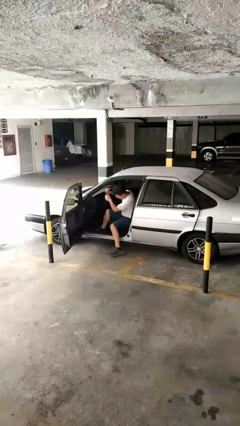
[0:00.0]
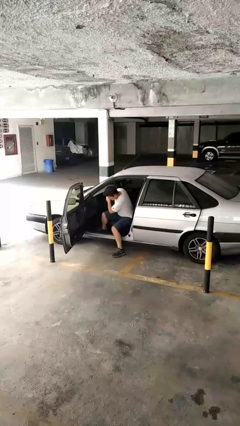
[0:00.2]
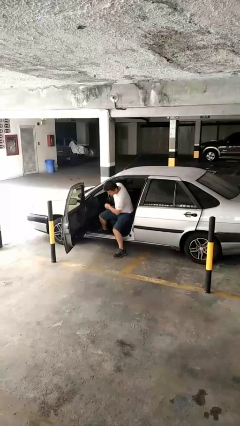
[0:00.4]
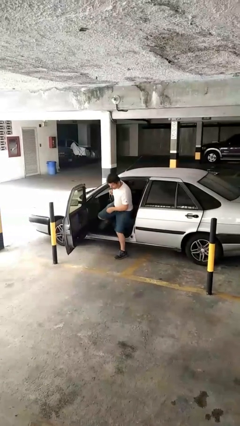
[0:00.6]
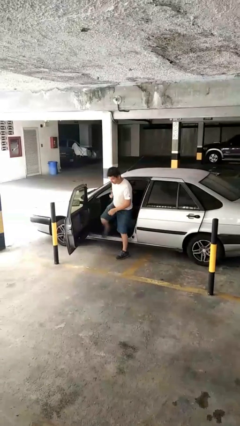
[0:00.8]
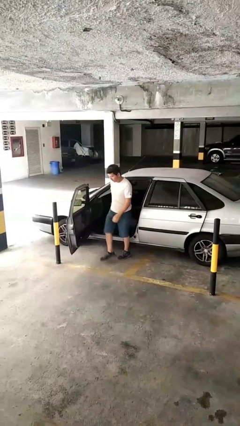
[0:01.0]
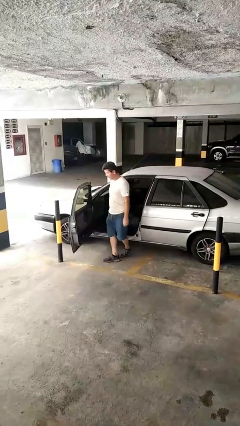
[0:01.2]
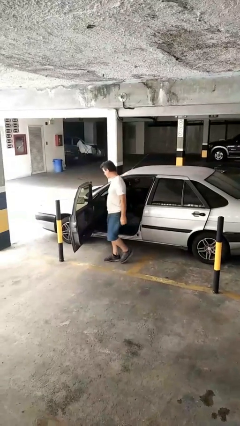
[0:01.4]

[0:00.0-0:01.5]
person exits car

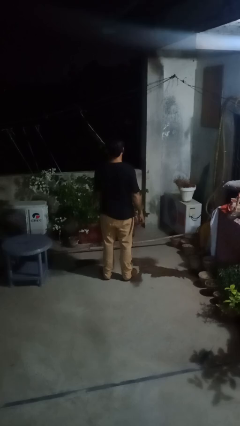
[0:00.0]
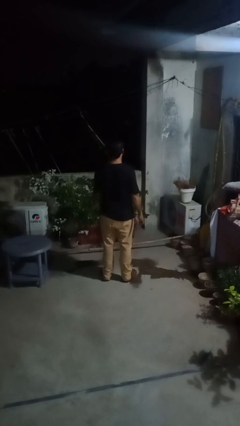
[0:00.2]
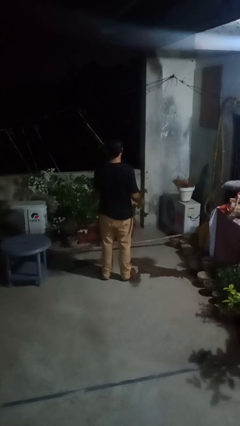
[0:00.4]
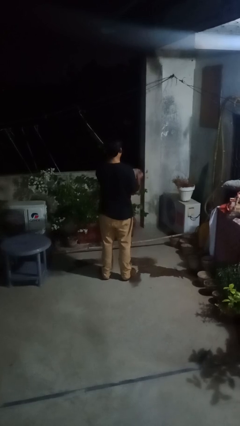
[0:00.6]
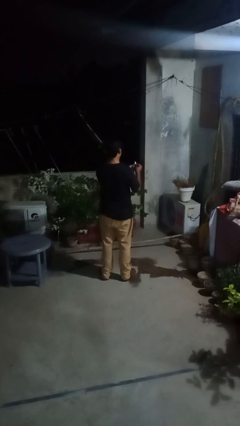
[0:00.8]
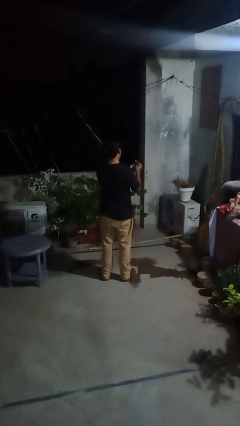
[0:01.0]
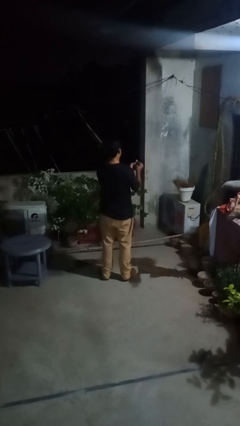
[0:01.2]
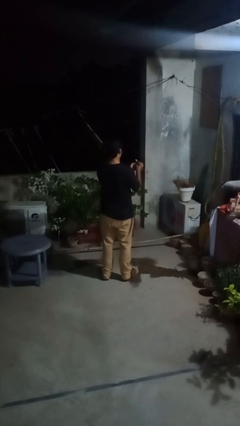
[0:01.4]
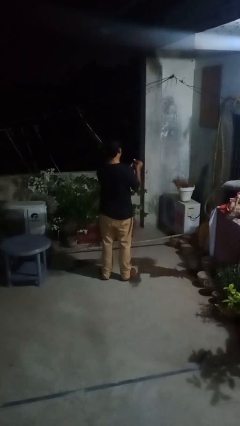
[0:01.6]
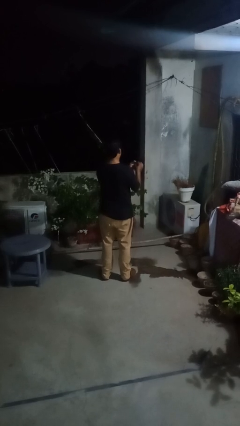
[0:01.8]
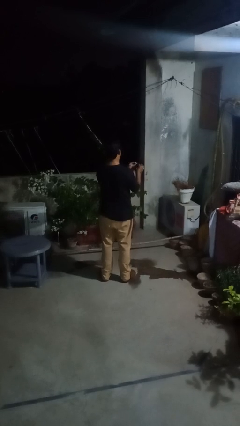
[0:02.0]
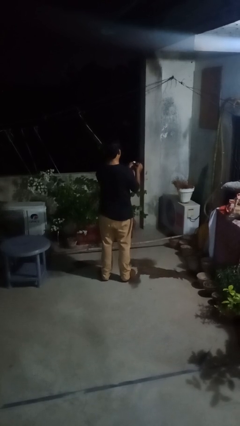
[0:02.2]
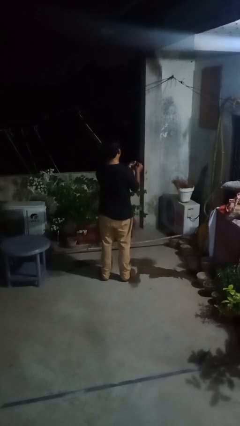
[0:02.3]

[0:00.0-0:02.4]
person files fingernails

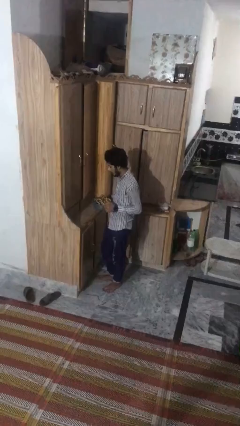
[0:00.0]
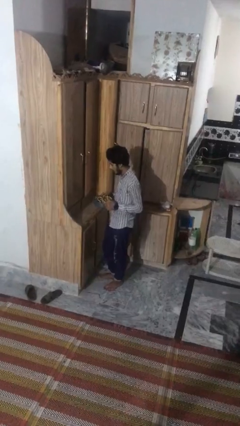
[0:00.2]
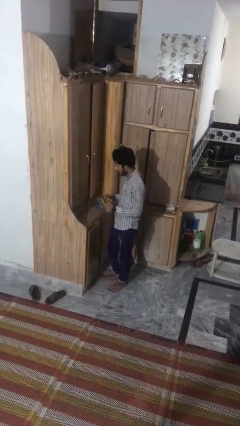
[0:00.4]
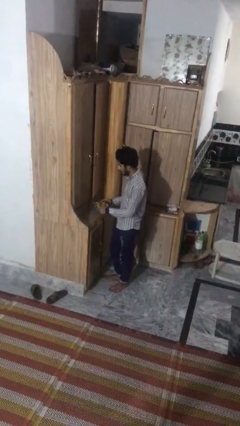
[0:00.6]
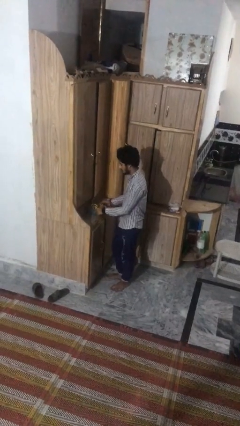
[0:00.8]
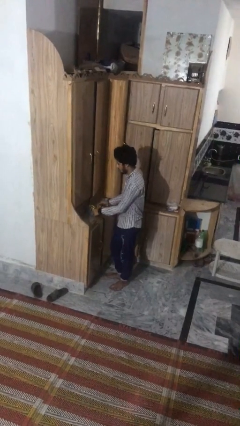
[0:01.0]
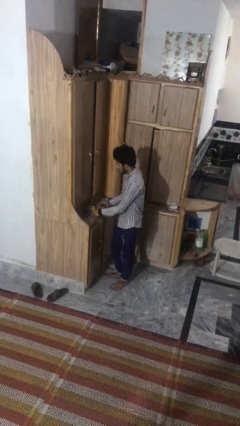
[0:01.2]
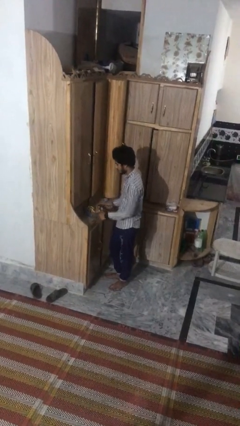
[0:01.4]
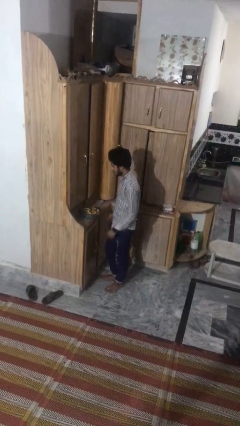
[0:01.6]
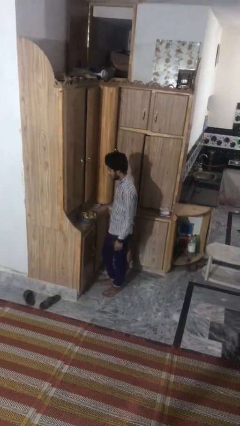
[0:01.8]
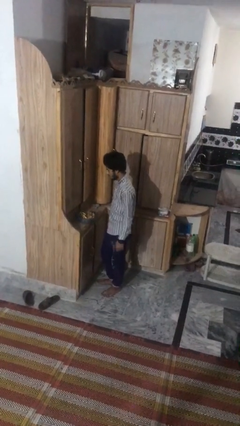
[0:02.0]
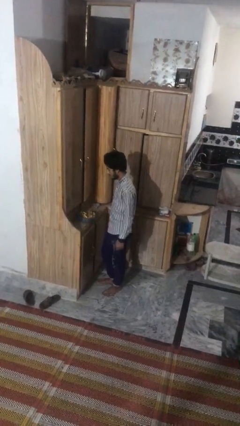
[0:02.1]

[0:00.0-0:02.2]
person puts down object on countertop

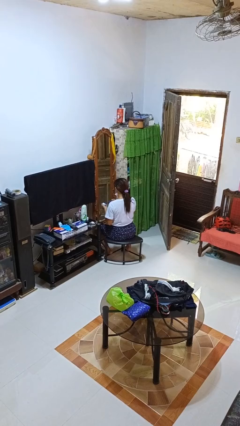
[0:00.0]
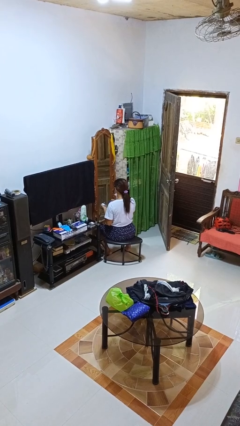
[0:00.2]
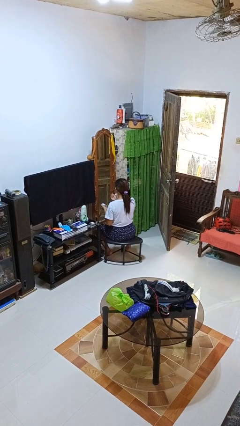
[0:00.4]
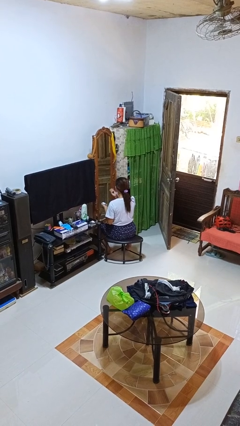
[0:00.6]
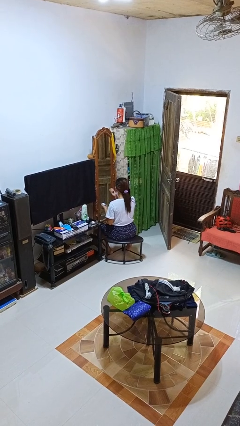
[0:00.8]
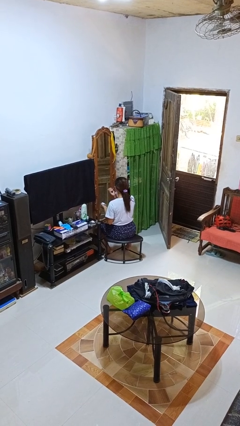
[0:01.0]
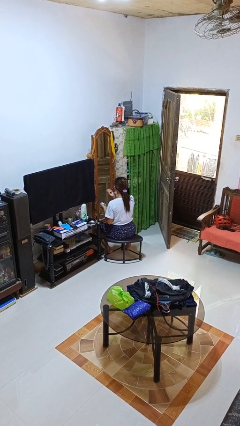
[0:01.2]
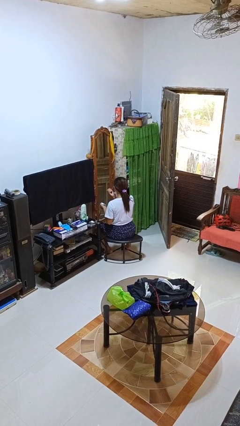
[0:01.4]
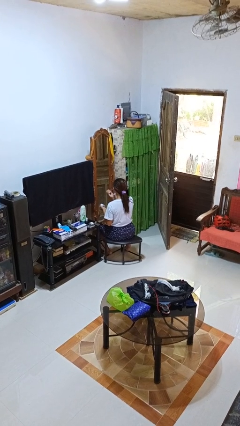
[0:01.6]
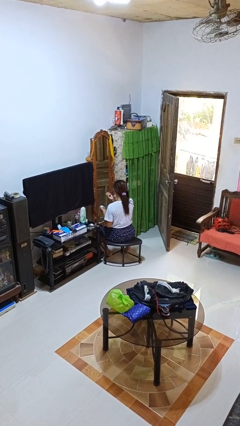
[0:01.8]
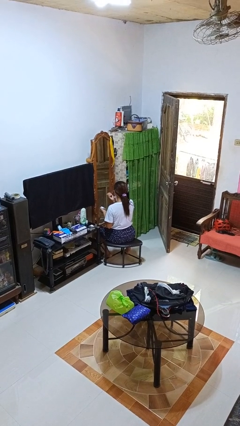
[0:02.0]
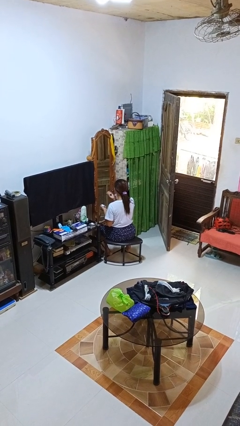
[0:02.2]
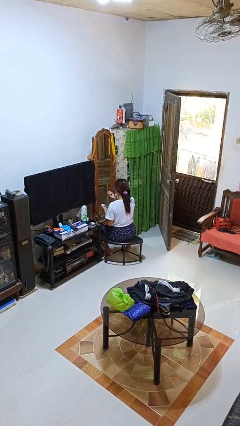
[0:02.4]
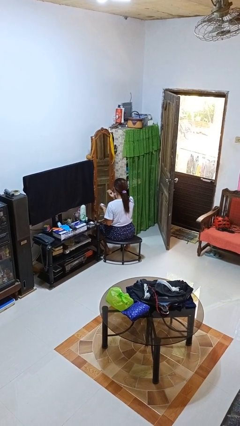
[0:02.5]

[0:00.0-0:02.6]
person applies eye makeup

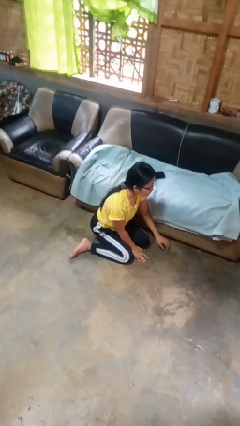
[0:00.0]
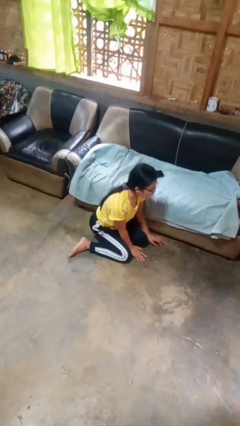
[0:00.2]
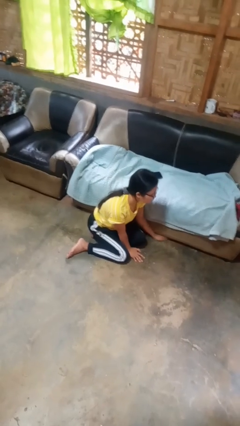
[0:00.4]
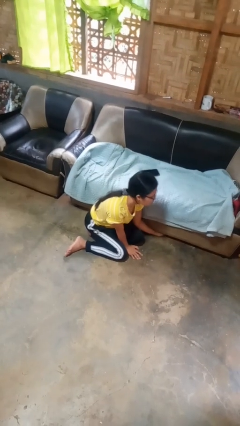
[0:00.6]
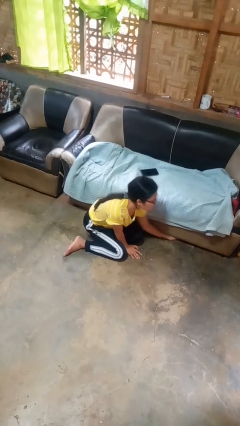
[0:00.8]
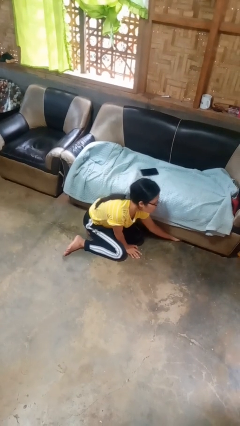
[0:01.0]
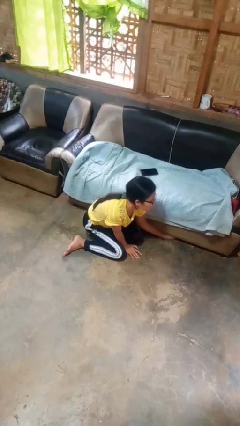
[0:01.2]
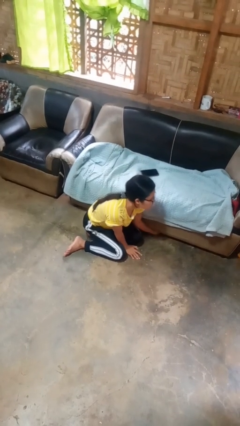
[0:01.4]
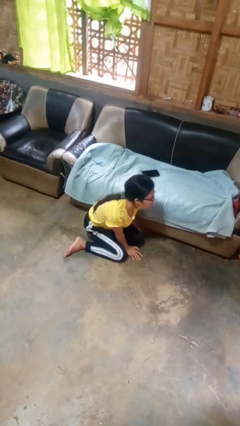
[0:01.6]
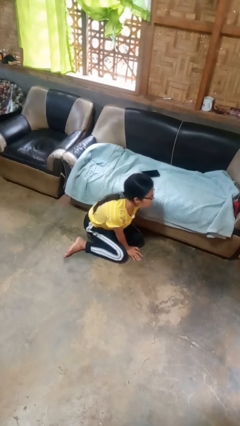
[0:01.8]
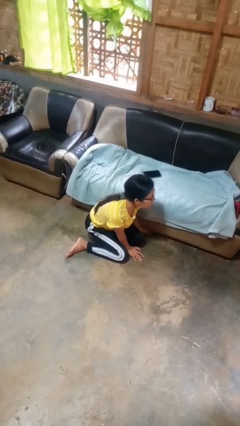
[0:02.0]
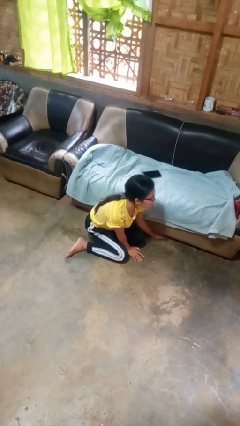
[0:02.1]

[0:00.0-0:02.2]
person searches under couch

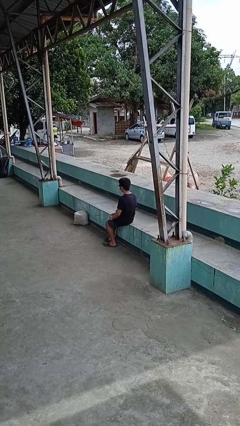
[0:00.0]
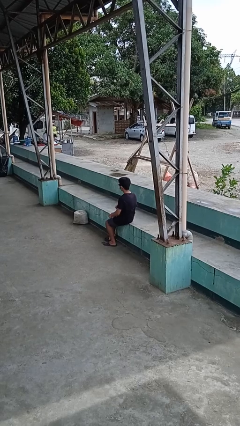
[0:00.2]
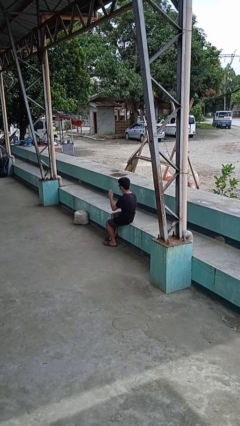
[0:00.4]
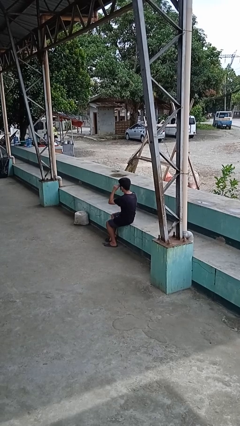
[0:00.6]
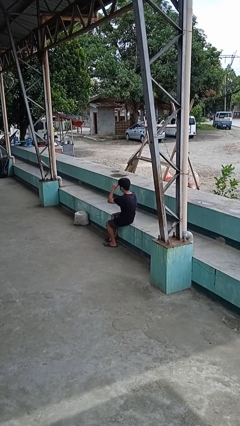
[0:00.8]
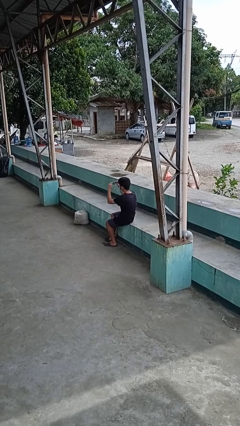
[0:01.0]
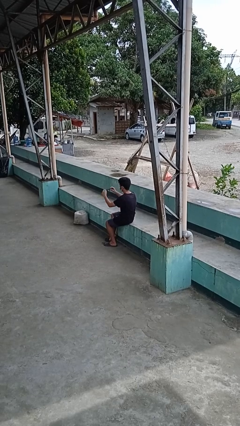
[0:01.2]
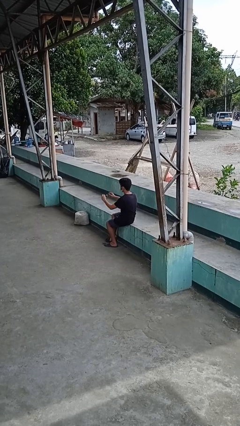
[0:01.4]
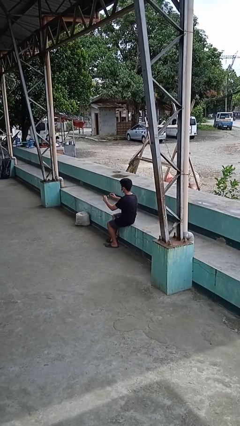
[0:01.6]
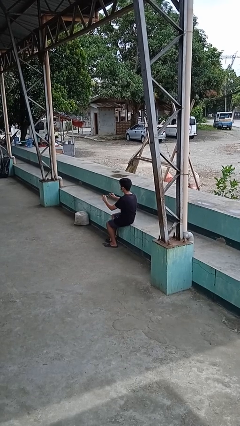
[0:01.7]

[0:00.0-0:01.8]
person takes off sunglasses

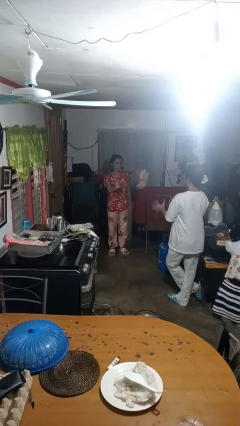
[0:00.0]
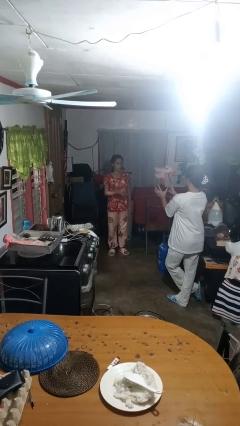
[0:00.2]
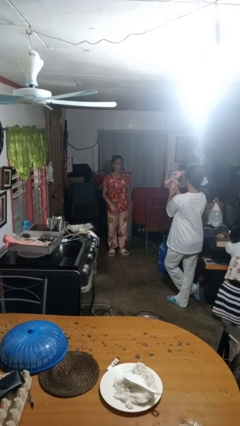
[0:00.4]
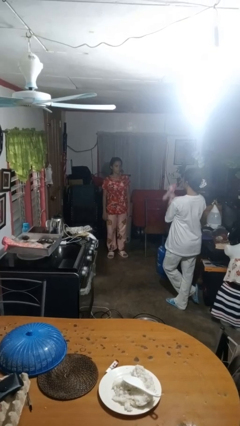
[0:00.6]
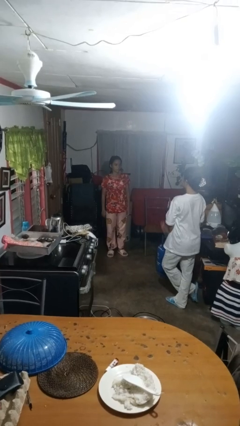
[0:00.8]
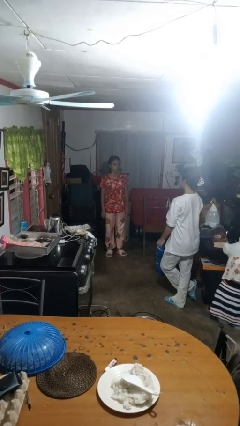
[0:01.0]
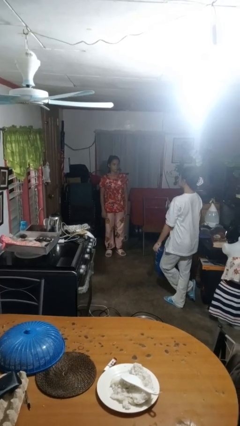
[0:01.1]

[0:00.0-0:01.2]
person throws object to person

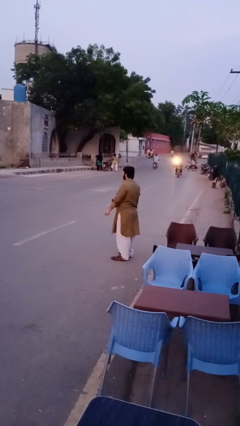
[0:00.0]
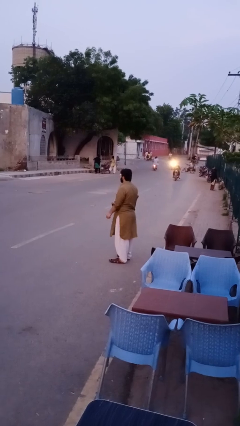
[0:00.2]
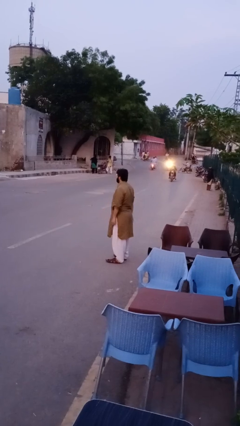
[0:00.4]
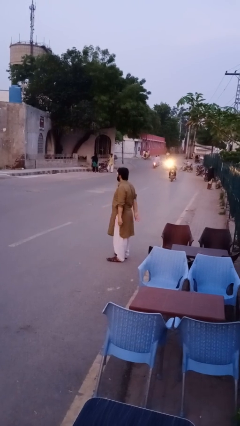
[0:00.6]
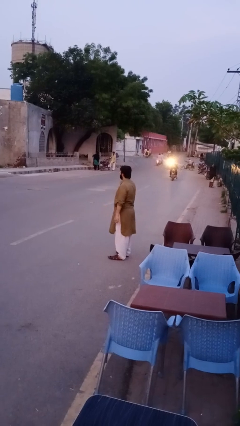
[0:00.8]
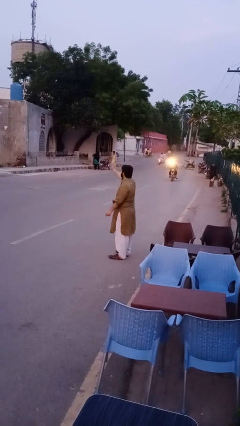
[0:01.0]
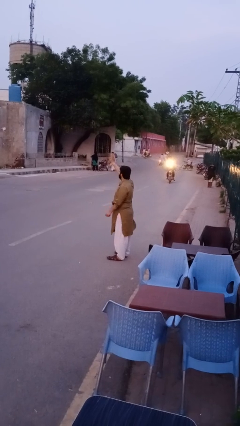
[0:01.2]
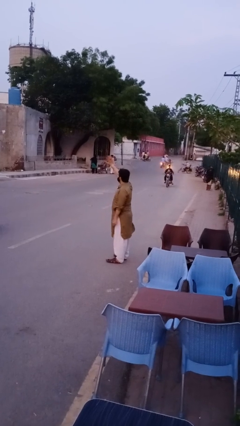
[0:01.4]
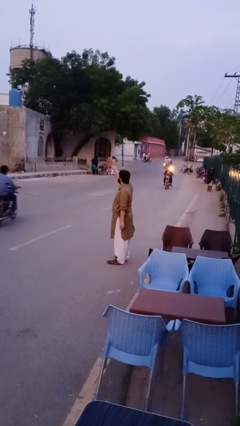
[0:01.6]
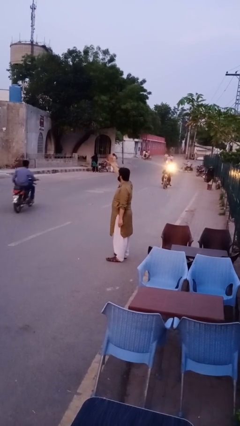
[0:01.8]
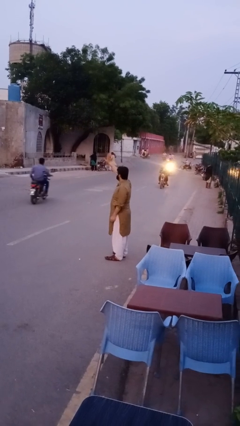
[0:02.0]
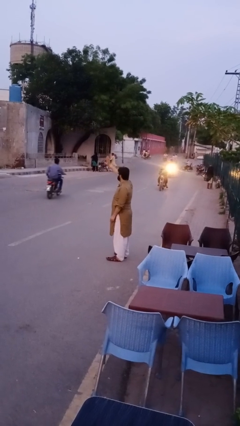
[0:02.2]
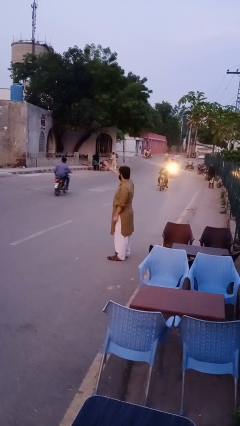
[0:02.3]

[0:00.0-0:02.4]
person waves at person

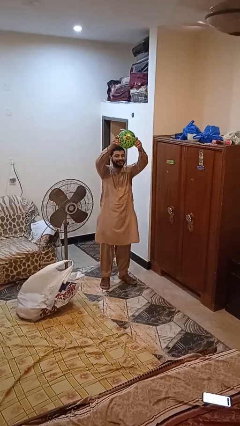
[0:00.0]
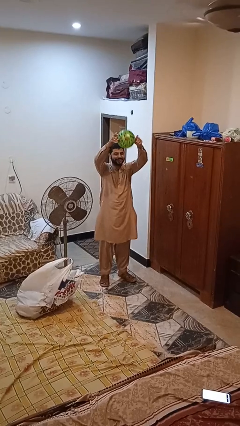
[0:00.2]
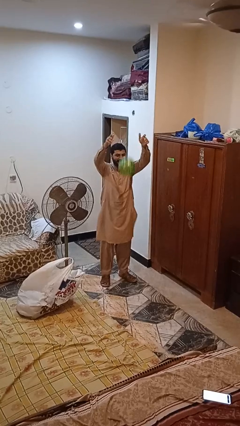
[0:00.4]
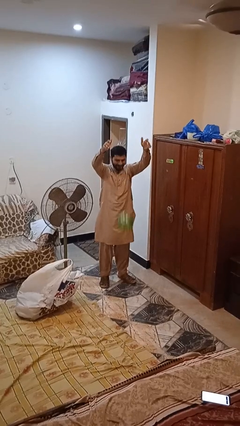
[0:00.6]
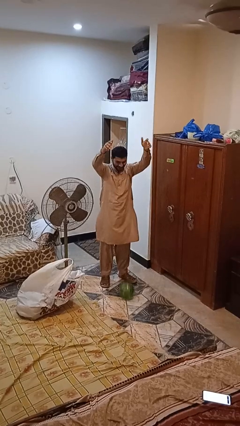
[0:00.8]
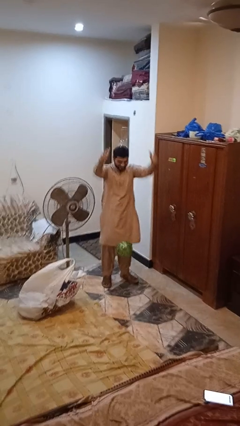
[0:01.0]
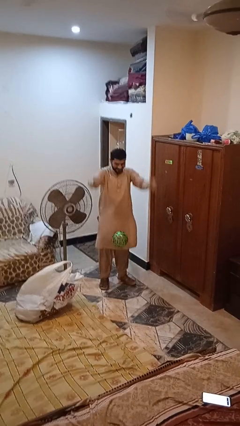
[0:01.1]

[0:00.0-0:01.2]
person drops object
